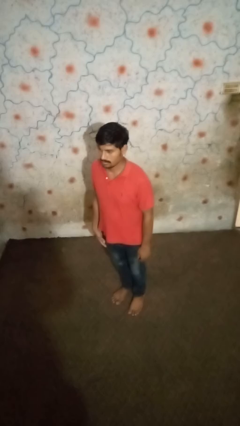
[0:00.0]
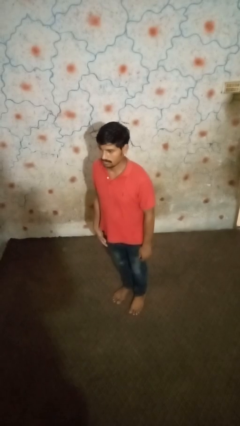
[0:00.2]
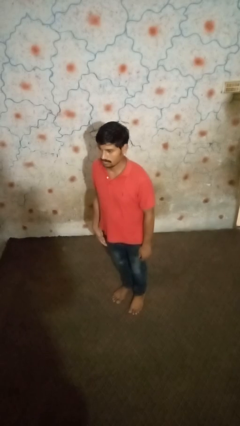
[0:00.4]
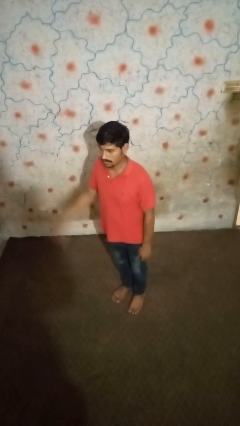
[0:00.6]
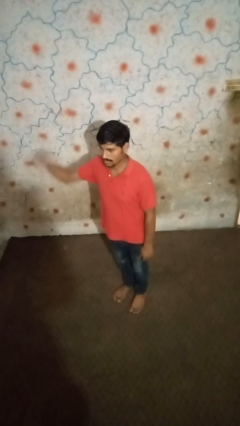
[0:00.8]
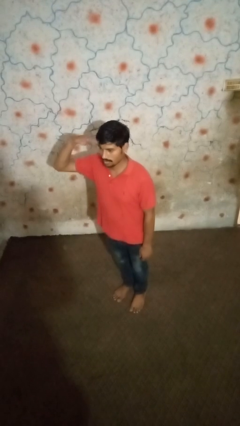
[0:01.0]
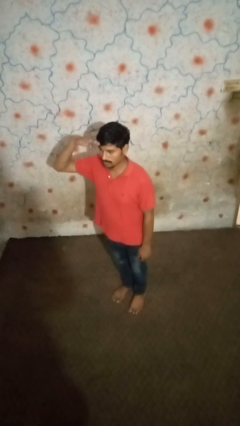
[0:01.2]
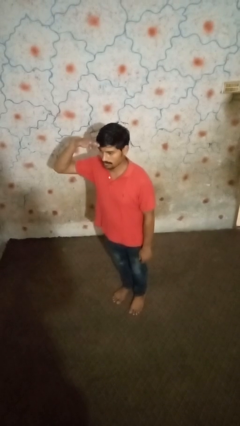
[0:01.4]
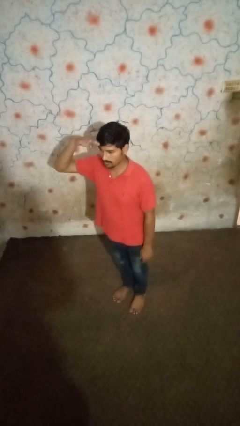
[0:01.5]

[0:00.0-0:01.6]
person salutes

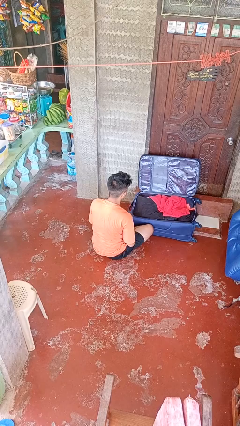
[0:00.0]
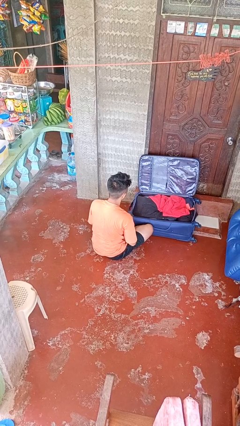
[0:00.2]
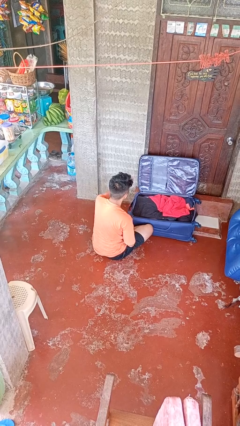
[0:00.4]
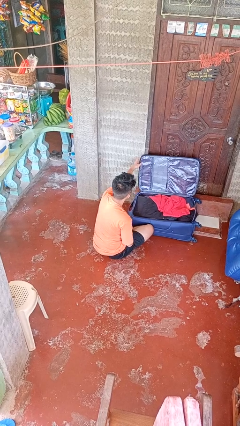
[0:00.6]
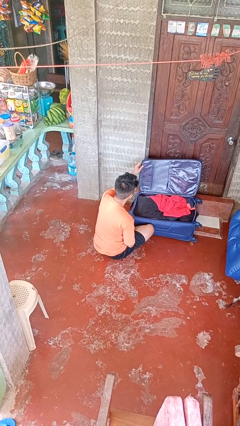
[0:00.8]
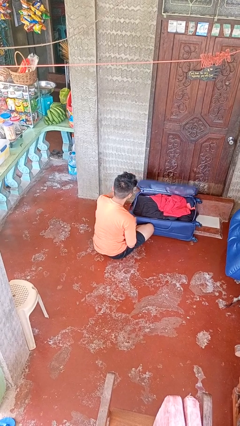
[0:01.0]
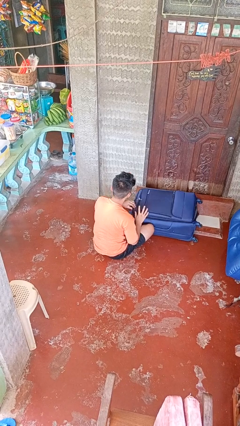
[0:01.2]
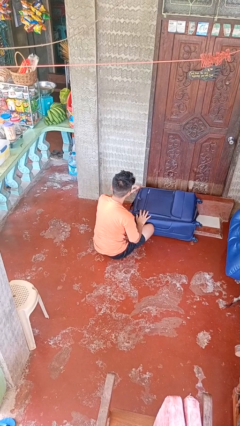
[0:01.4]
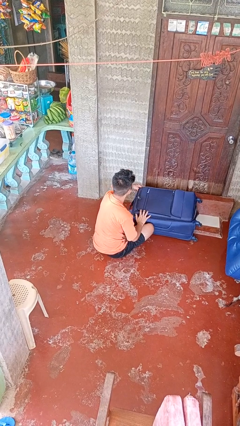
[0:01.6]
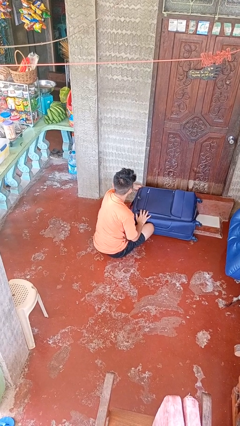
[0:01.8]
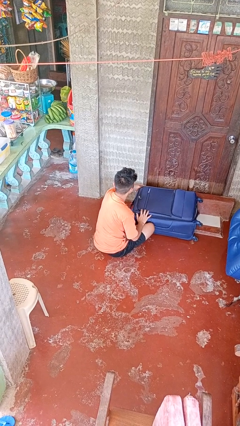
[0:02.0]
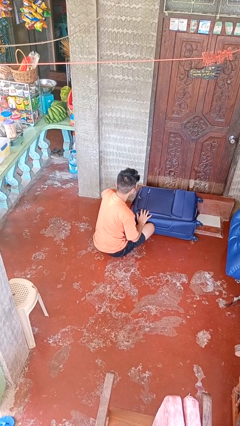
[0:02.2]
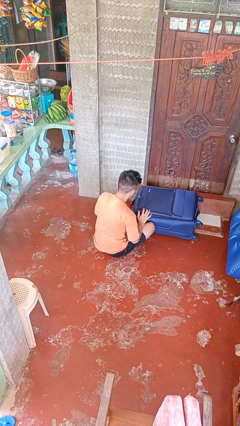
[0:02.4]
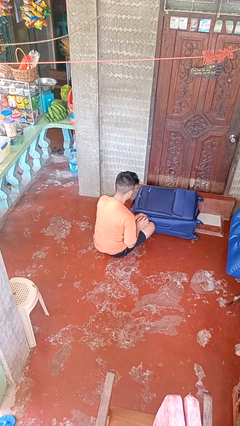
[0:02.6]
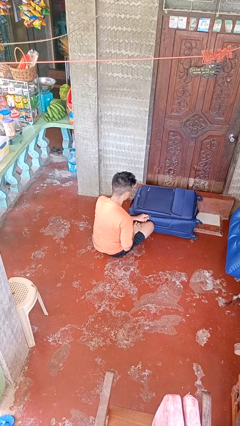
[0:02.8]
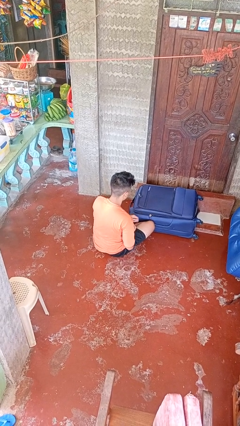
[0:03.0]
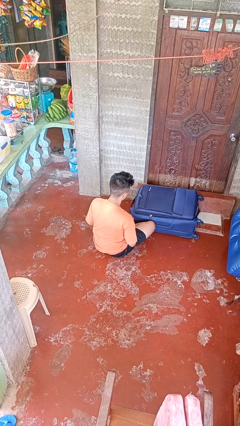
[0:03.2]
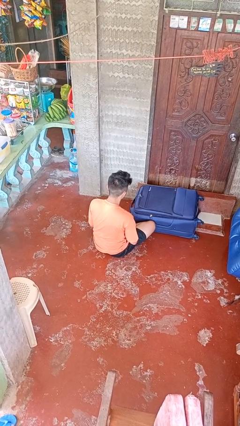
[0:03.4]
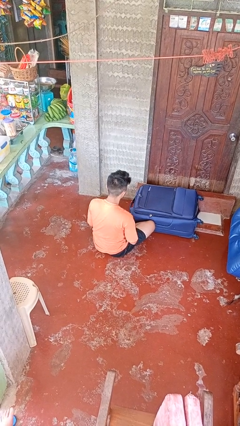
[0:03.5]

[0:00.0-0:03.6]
person closes suitcase

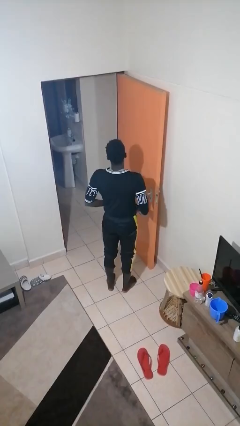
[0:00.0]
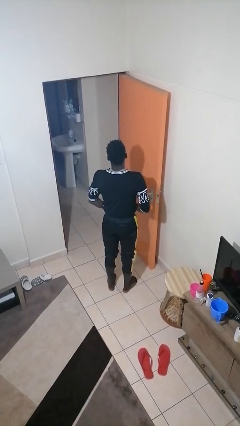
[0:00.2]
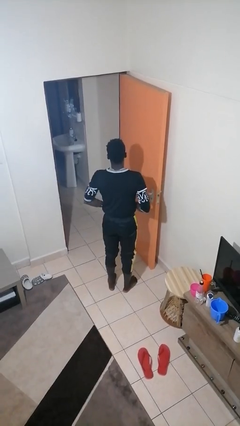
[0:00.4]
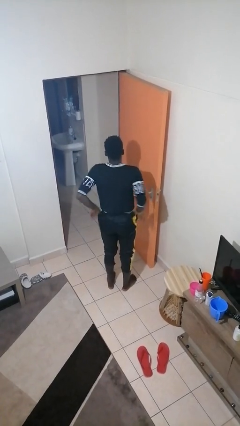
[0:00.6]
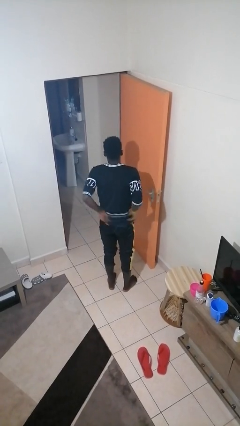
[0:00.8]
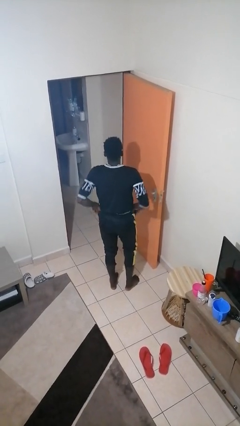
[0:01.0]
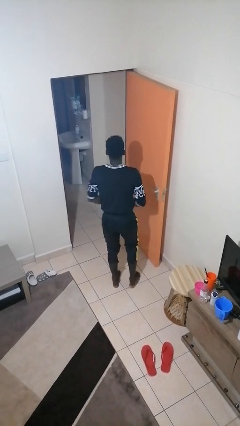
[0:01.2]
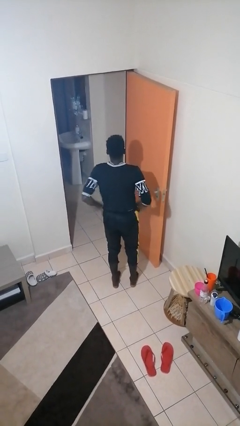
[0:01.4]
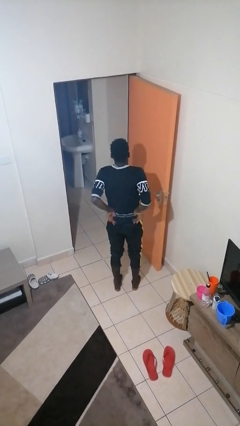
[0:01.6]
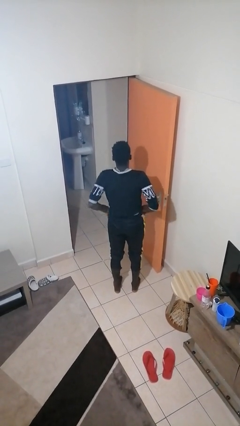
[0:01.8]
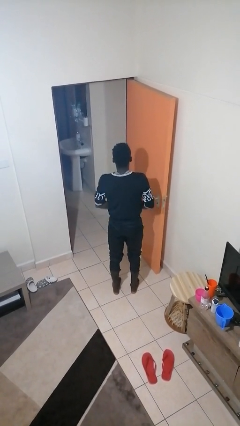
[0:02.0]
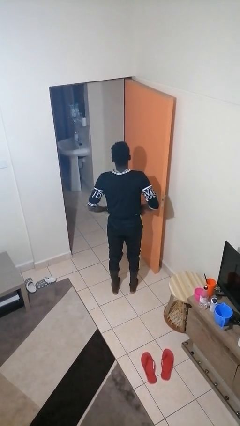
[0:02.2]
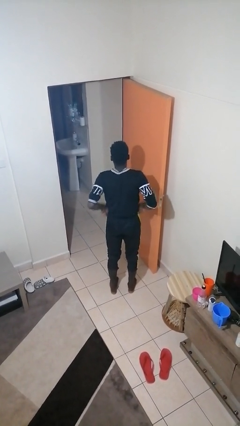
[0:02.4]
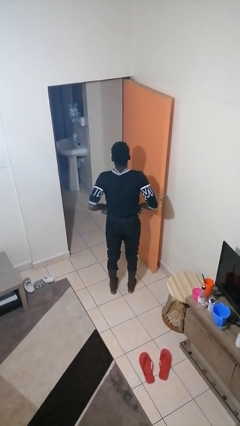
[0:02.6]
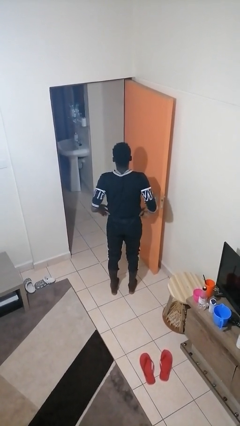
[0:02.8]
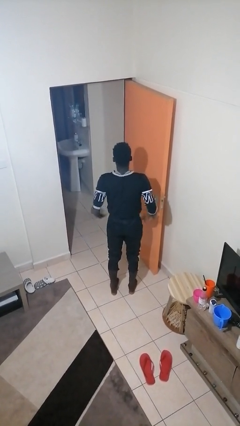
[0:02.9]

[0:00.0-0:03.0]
person hikes up pants

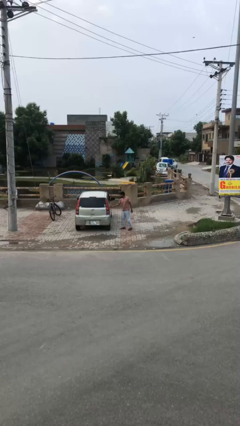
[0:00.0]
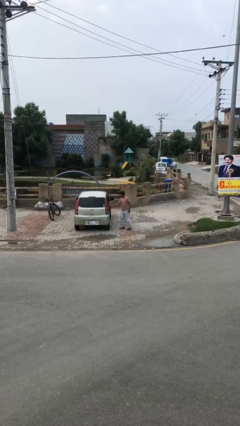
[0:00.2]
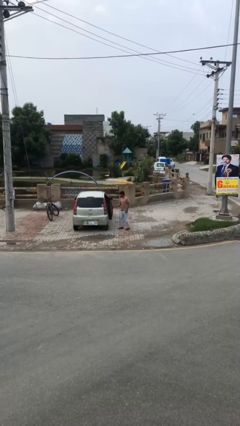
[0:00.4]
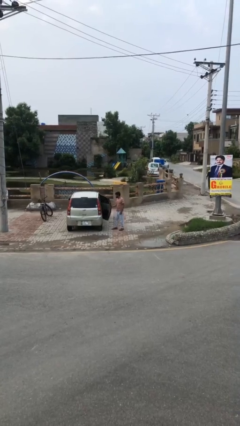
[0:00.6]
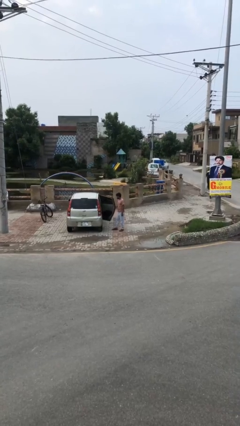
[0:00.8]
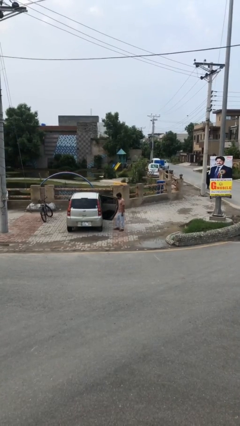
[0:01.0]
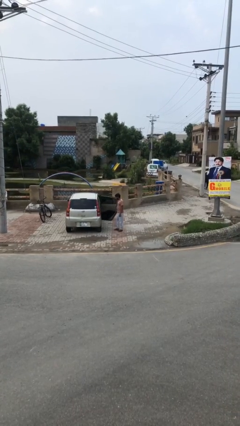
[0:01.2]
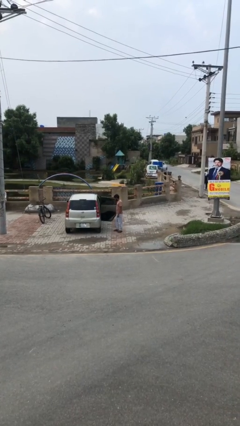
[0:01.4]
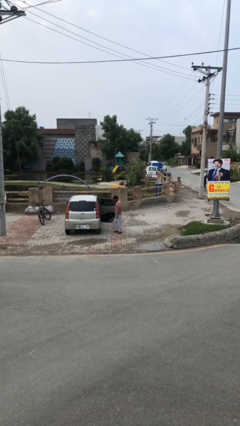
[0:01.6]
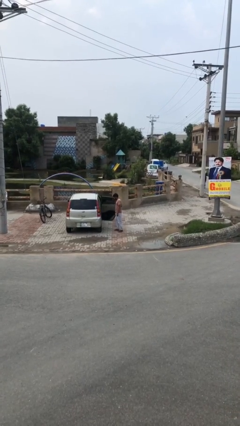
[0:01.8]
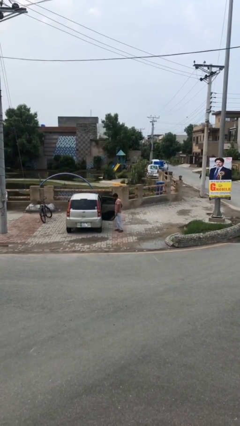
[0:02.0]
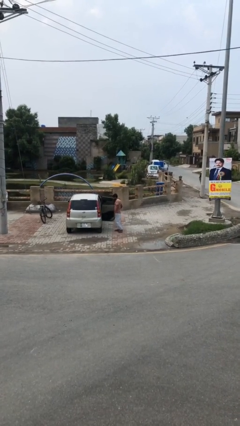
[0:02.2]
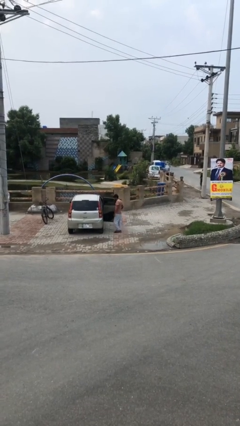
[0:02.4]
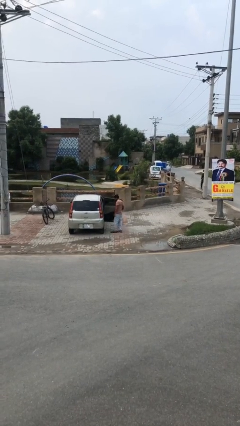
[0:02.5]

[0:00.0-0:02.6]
person opens car door

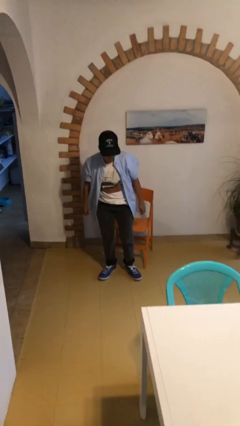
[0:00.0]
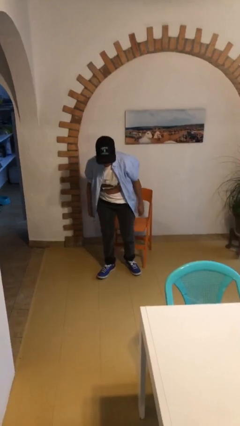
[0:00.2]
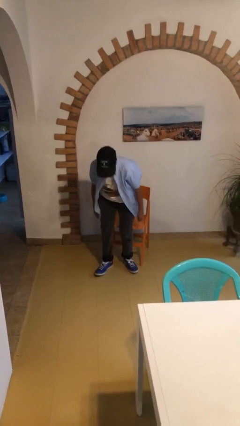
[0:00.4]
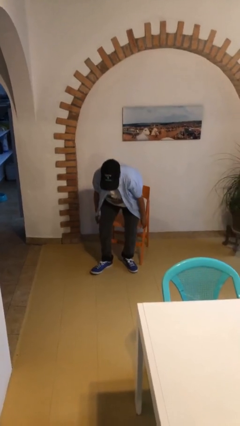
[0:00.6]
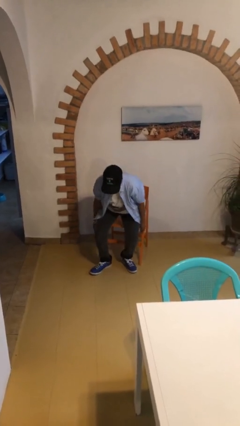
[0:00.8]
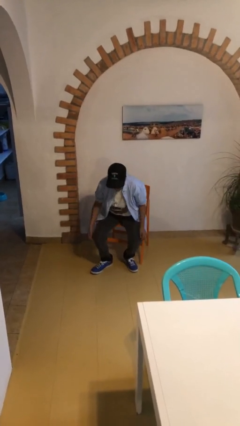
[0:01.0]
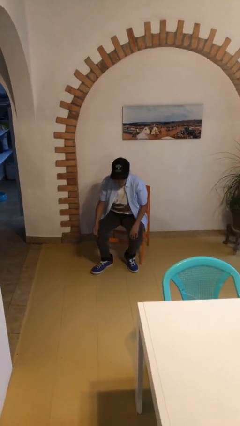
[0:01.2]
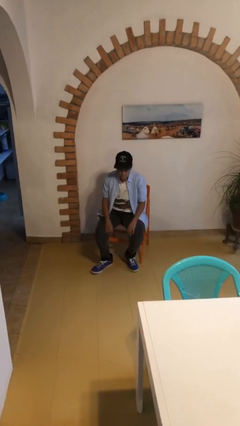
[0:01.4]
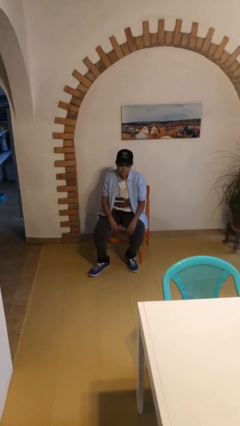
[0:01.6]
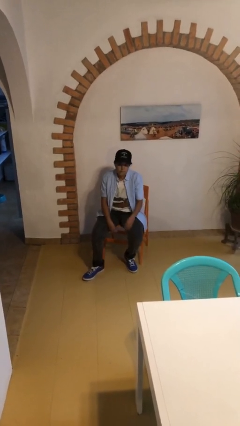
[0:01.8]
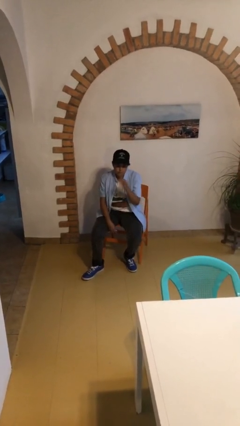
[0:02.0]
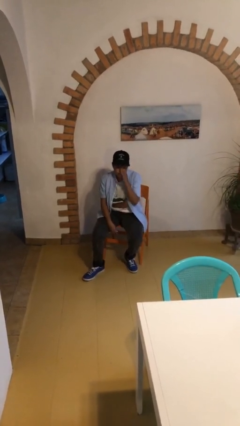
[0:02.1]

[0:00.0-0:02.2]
person sits down

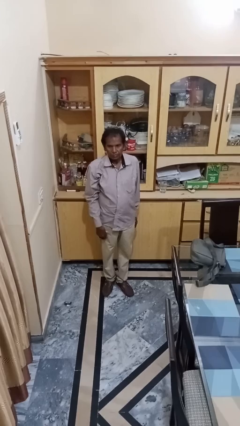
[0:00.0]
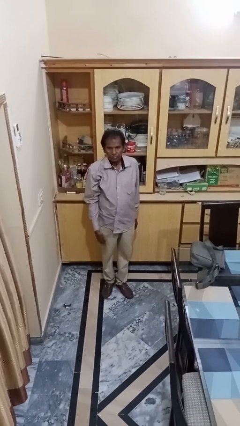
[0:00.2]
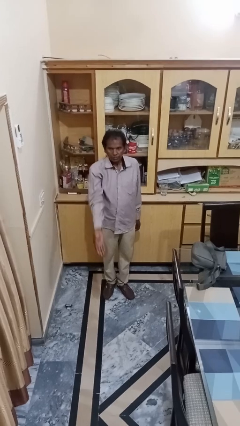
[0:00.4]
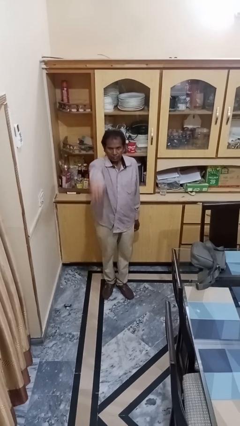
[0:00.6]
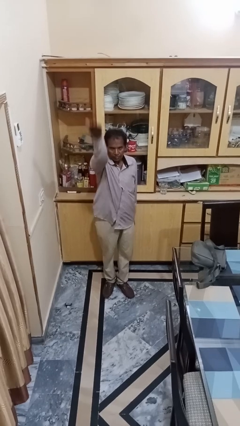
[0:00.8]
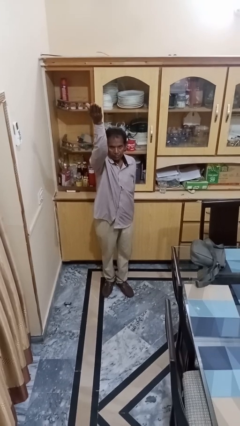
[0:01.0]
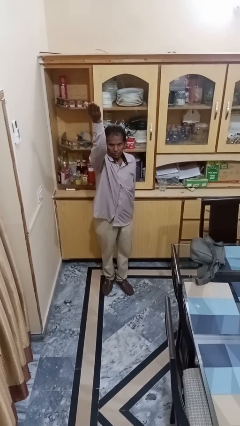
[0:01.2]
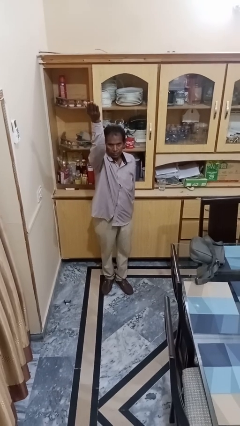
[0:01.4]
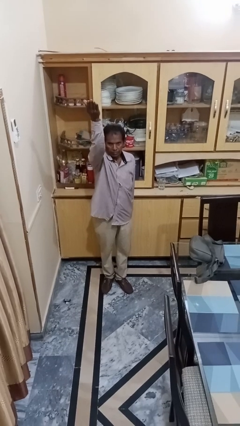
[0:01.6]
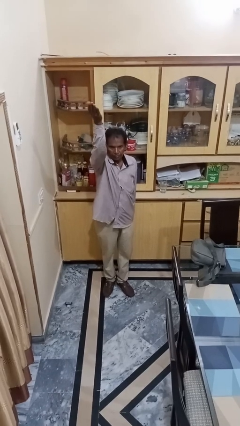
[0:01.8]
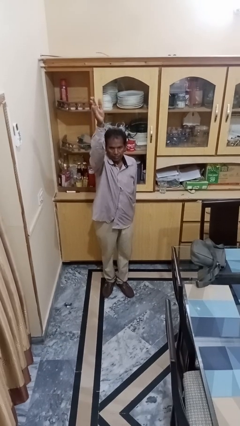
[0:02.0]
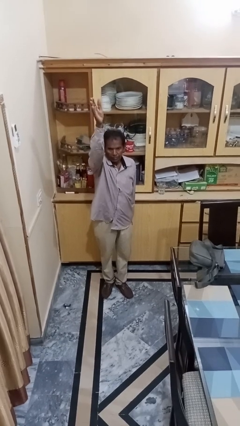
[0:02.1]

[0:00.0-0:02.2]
person gestures swipe up

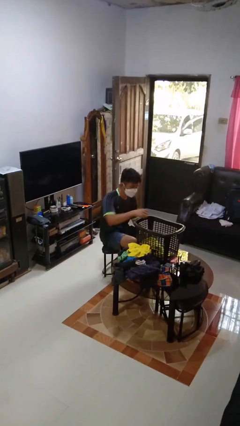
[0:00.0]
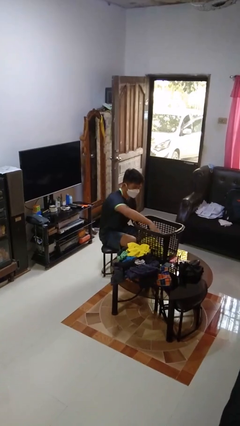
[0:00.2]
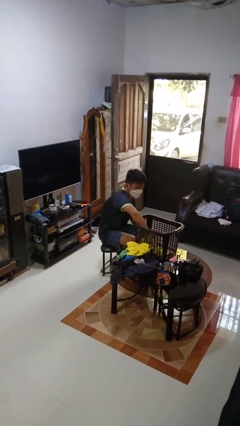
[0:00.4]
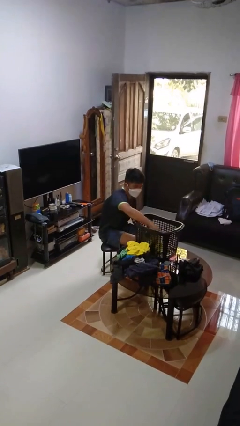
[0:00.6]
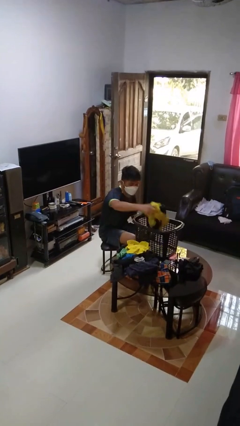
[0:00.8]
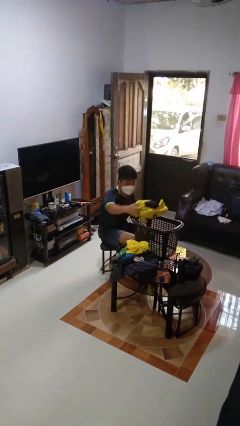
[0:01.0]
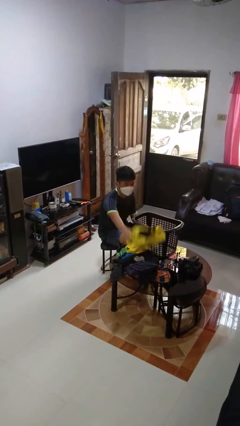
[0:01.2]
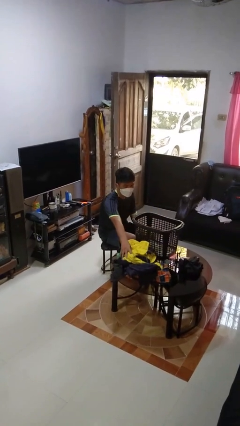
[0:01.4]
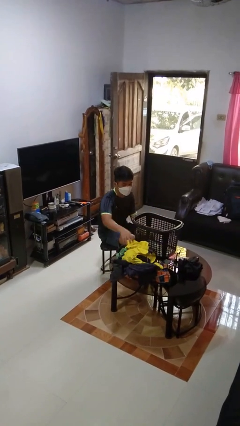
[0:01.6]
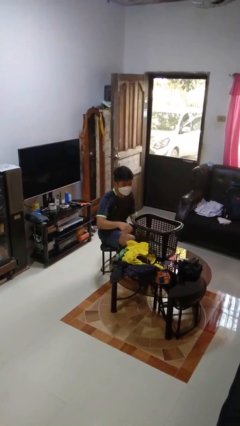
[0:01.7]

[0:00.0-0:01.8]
person takes object from basket
